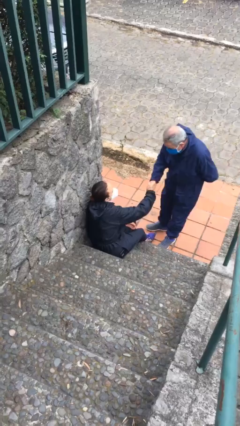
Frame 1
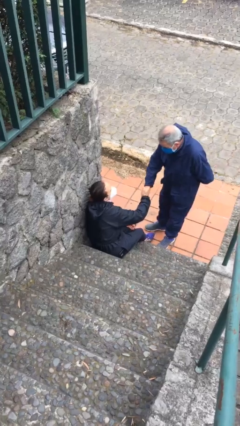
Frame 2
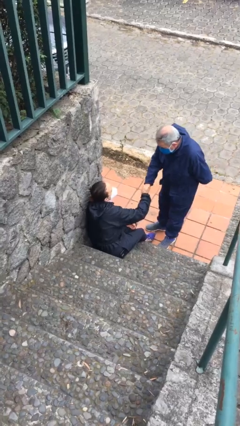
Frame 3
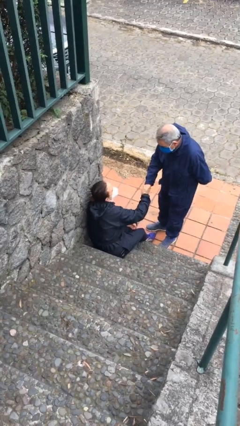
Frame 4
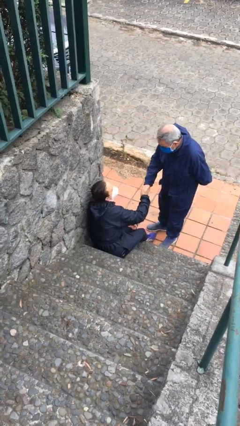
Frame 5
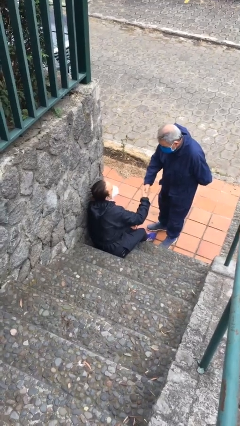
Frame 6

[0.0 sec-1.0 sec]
person shakes hand

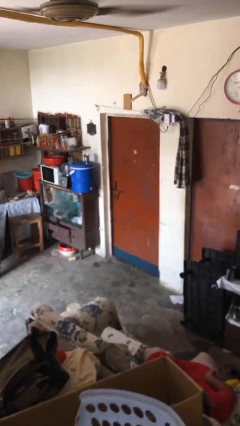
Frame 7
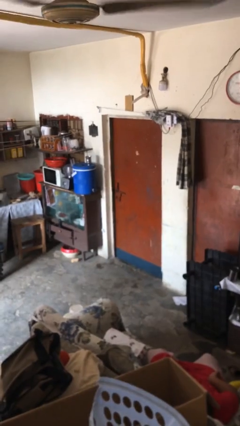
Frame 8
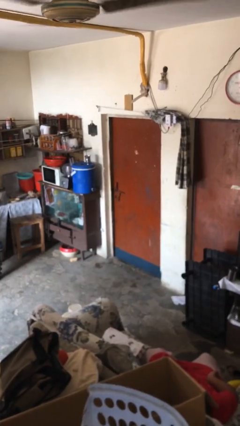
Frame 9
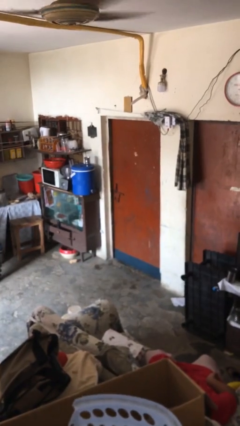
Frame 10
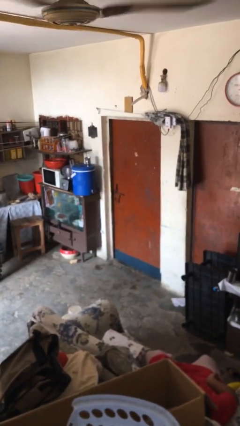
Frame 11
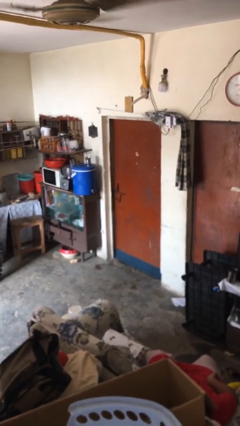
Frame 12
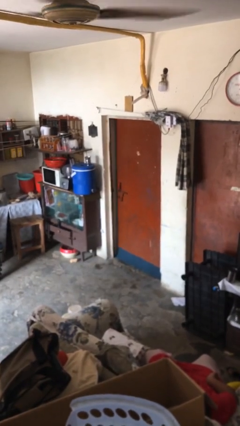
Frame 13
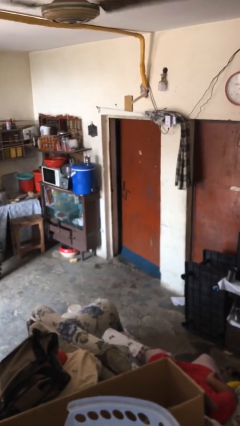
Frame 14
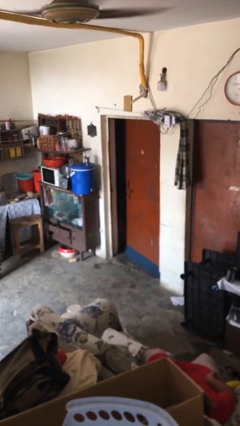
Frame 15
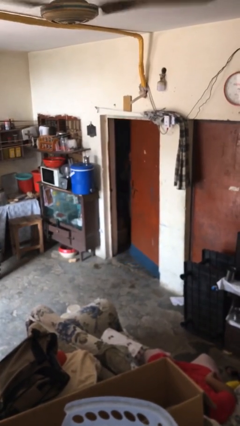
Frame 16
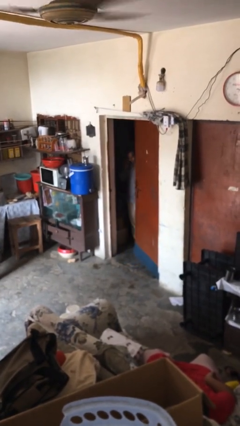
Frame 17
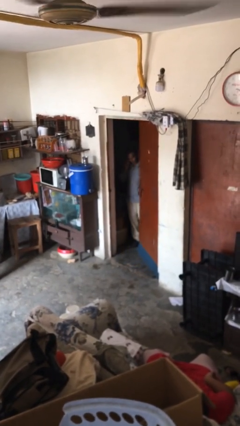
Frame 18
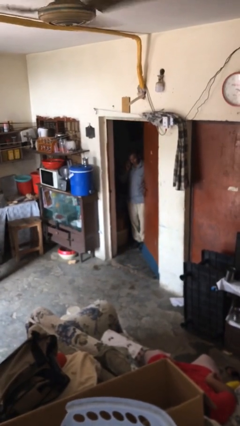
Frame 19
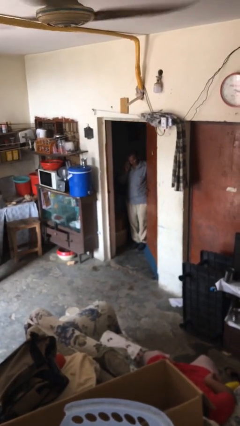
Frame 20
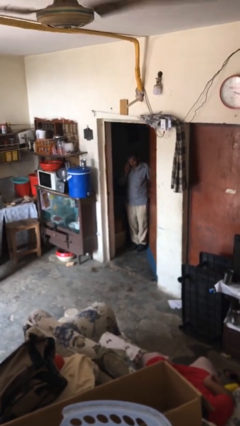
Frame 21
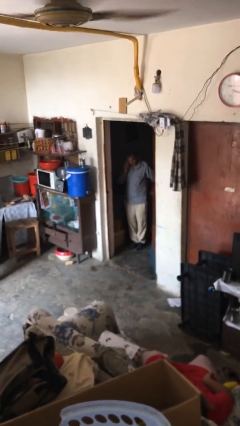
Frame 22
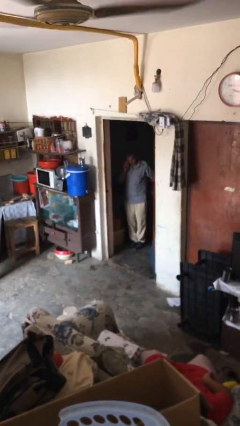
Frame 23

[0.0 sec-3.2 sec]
person opens facility door

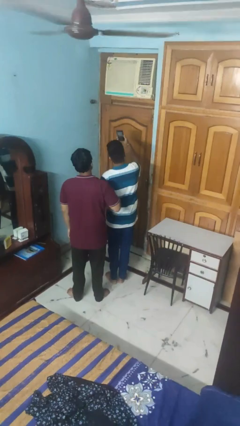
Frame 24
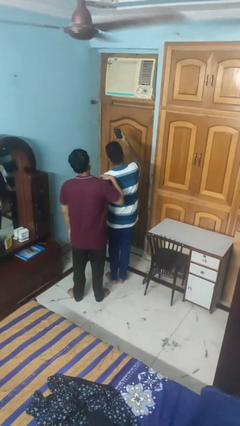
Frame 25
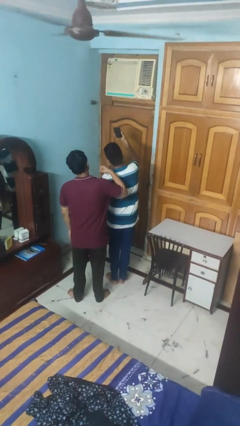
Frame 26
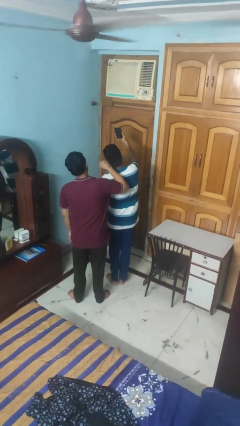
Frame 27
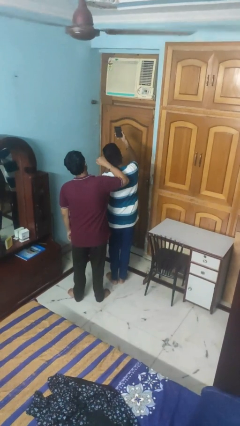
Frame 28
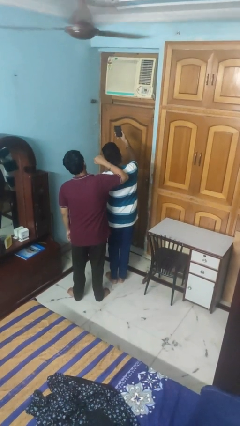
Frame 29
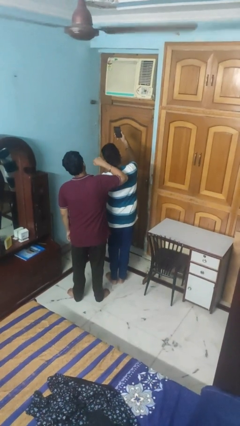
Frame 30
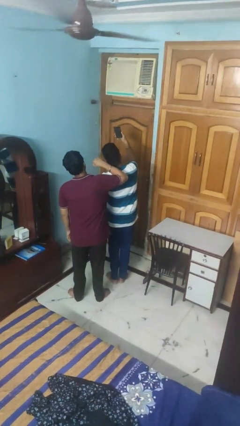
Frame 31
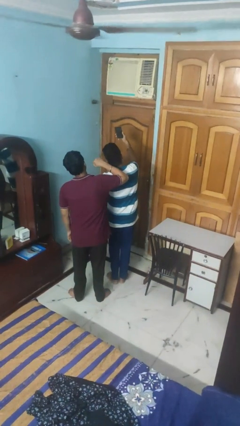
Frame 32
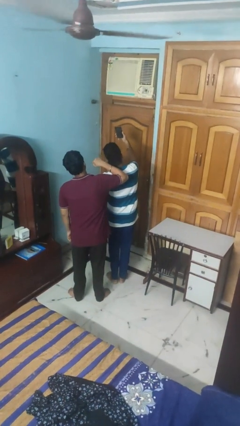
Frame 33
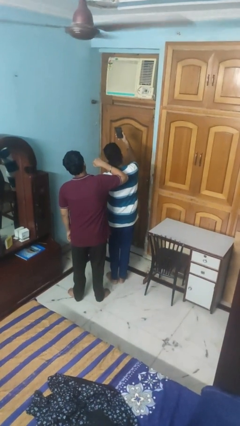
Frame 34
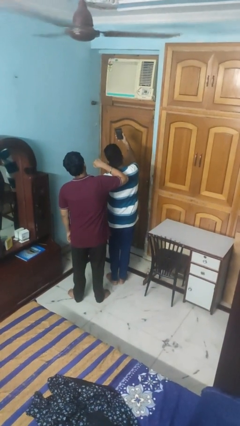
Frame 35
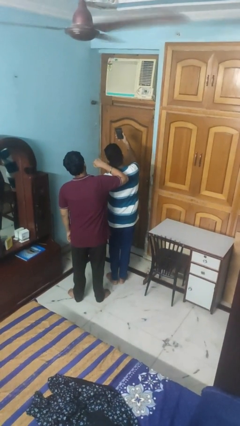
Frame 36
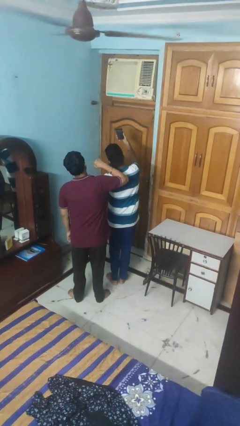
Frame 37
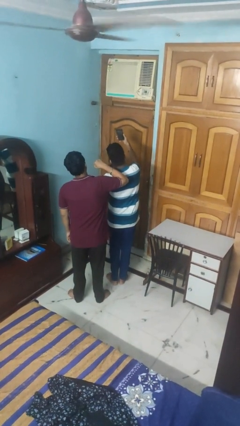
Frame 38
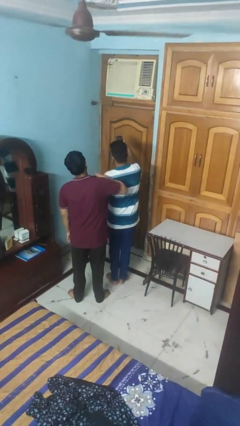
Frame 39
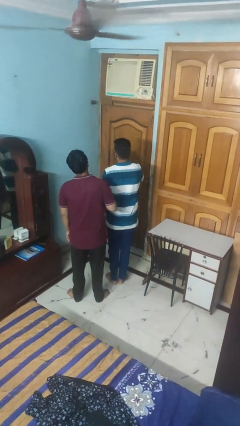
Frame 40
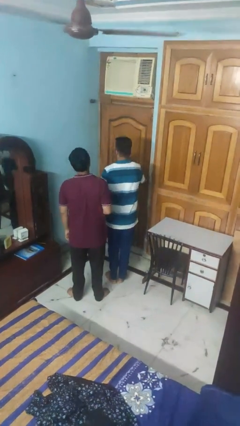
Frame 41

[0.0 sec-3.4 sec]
person takes selfie with person

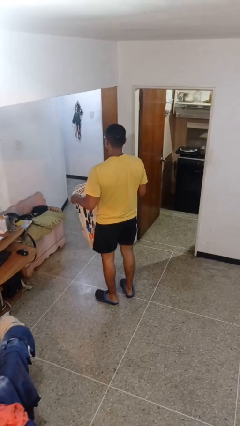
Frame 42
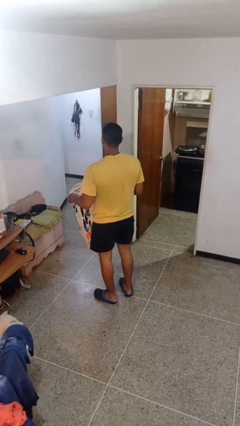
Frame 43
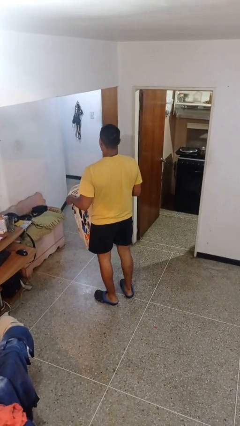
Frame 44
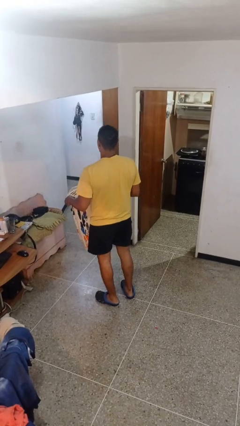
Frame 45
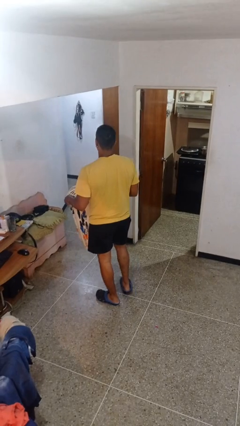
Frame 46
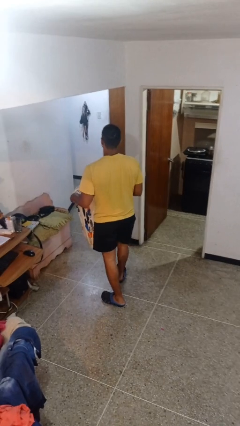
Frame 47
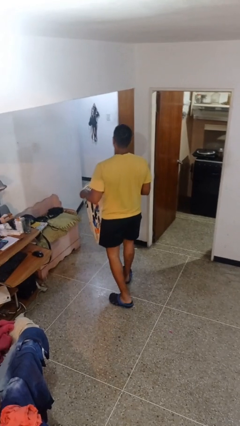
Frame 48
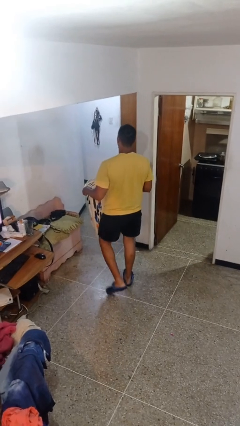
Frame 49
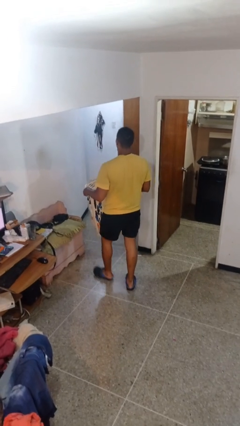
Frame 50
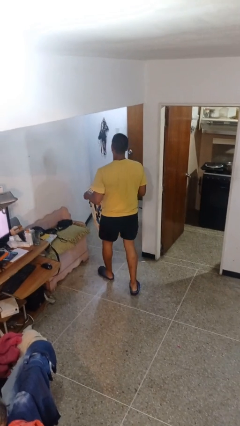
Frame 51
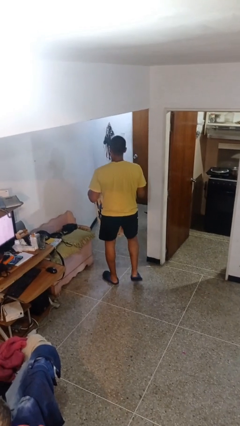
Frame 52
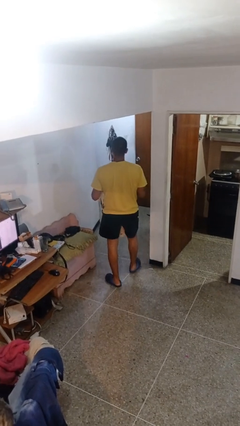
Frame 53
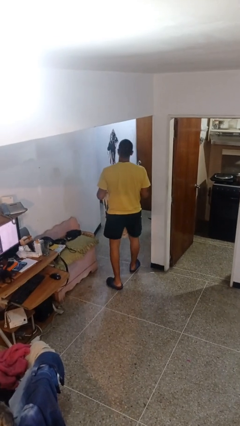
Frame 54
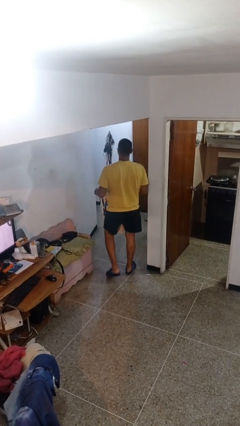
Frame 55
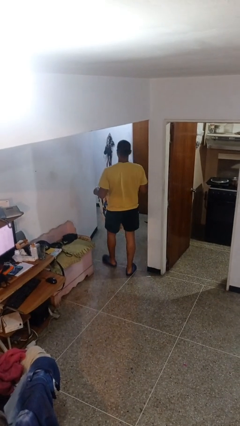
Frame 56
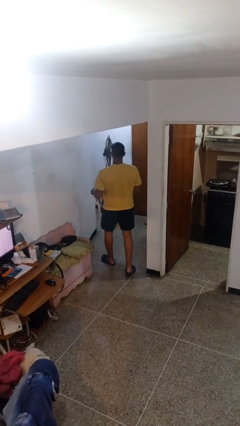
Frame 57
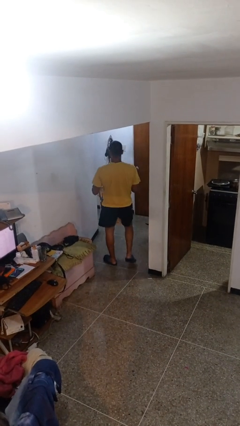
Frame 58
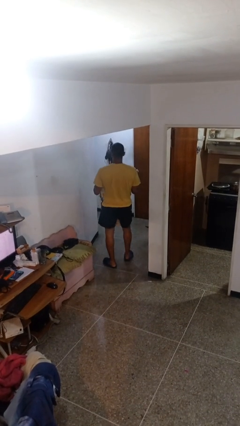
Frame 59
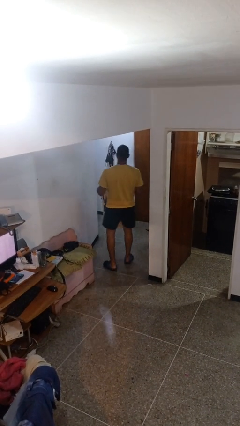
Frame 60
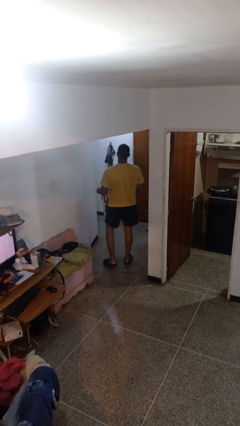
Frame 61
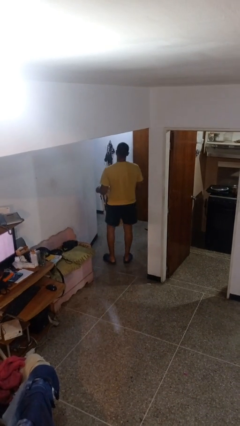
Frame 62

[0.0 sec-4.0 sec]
person carries laundry basket

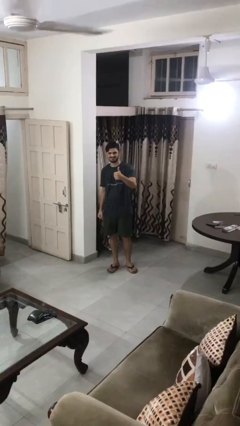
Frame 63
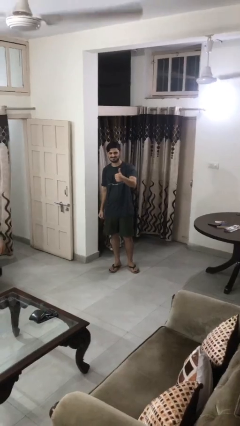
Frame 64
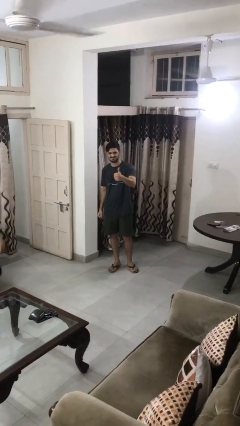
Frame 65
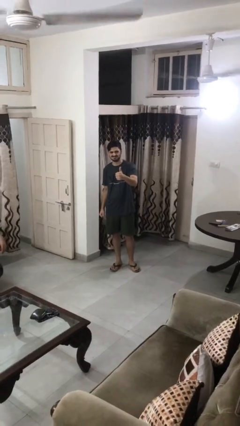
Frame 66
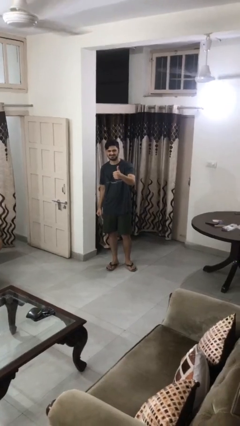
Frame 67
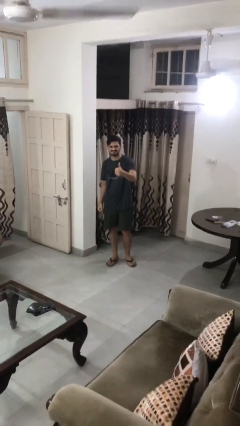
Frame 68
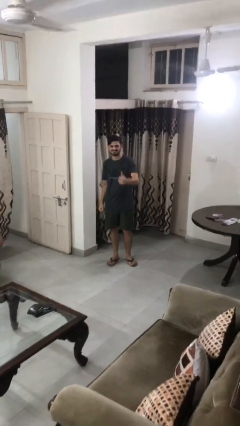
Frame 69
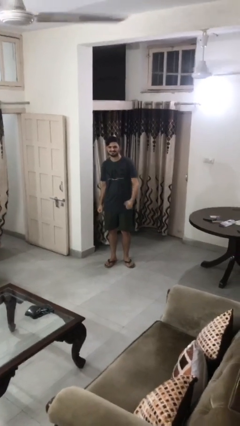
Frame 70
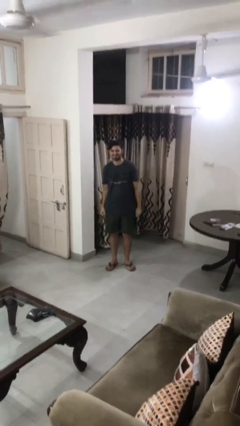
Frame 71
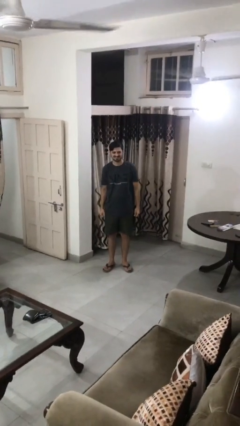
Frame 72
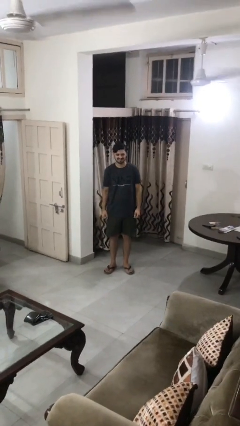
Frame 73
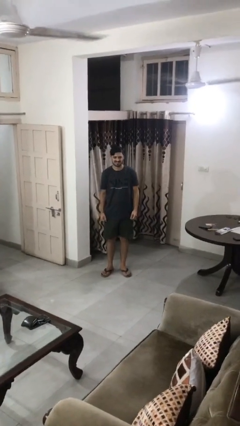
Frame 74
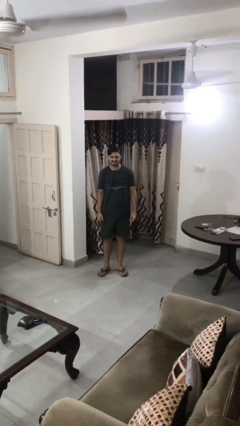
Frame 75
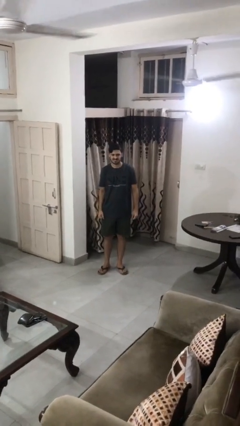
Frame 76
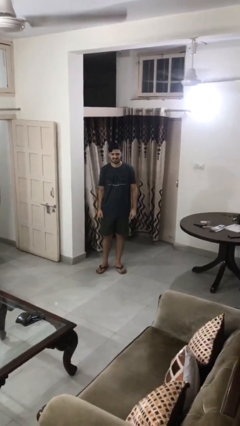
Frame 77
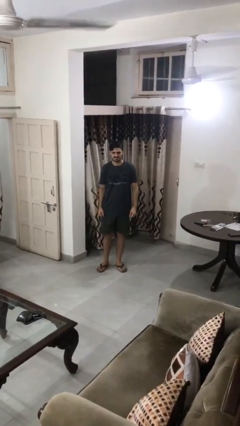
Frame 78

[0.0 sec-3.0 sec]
person gestures thumbs up

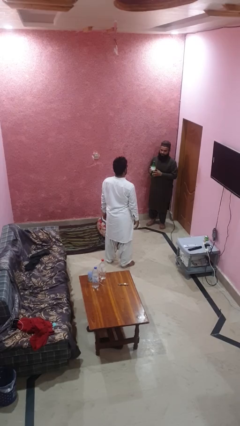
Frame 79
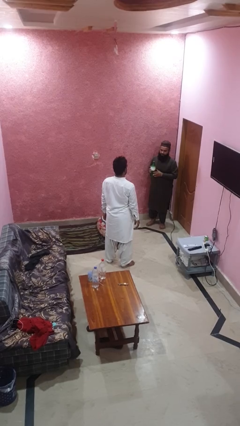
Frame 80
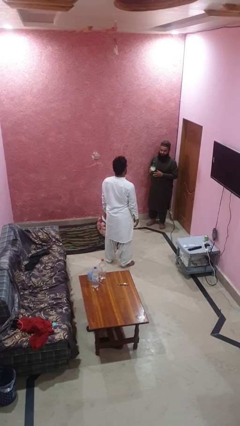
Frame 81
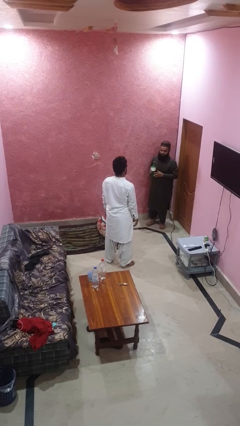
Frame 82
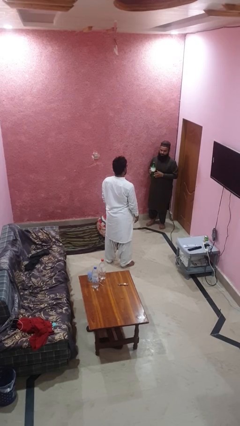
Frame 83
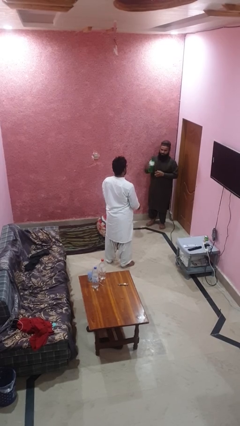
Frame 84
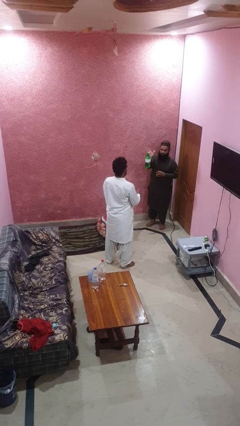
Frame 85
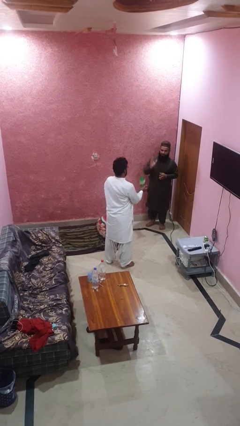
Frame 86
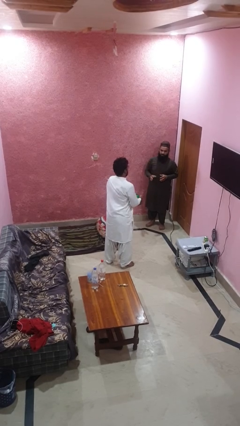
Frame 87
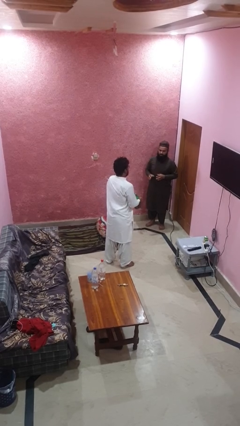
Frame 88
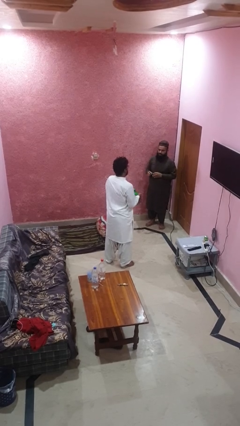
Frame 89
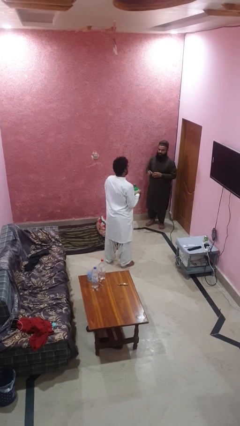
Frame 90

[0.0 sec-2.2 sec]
person catches object from person

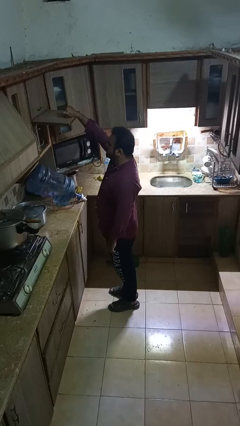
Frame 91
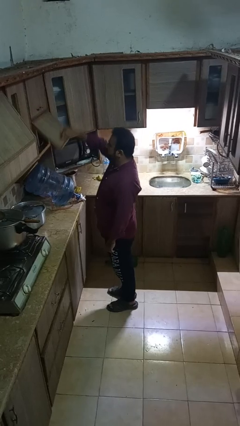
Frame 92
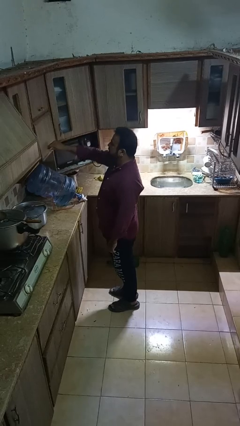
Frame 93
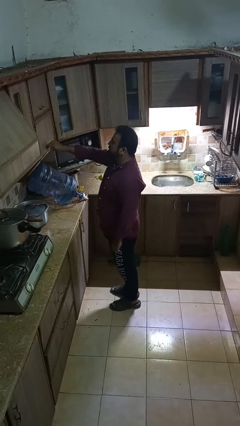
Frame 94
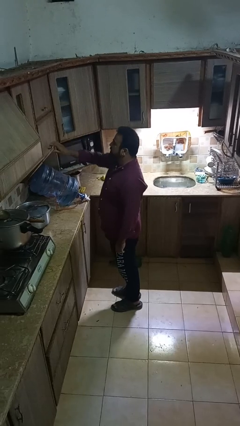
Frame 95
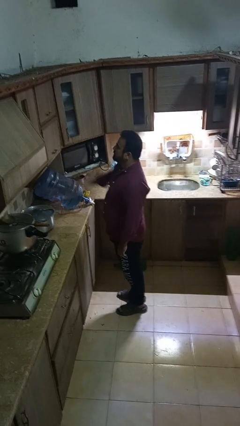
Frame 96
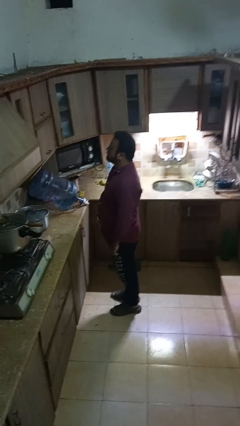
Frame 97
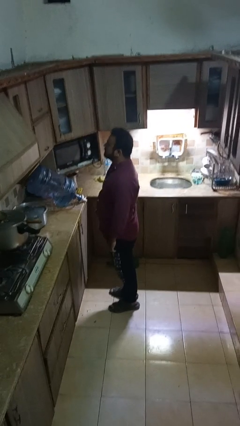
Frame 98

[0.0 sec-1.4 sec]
person closes cabinet
